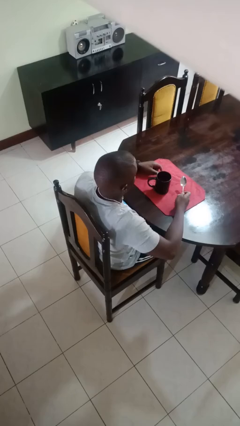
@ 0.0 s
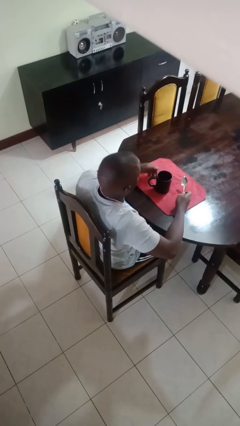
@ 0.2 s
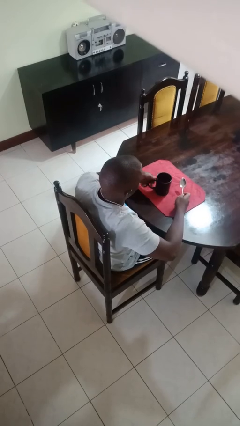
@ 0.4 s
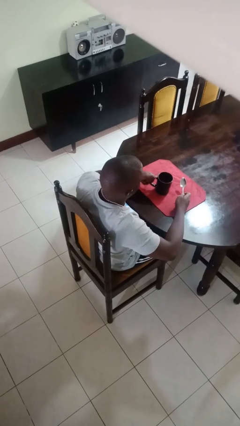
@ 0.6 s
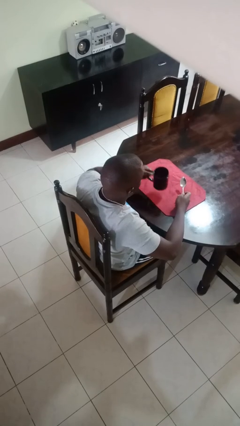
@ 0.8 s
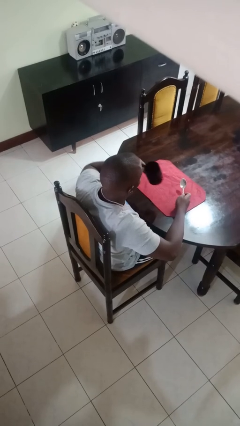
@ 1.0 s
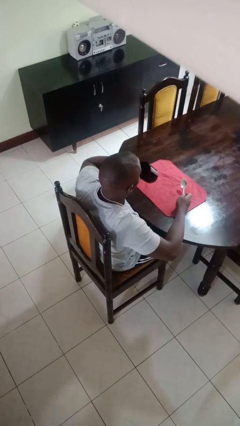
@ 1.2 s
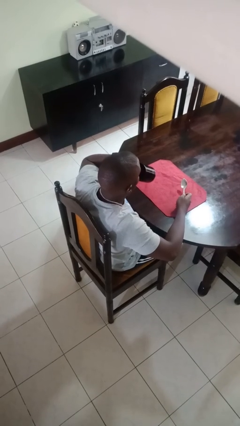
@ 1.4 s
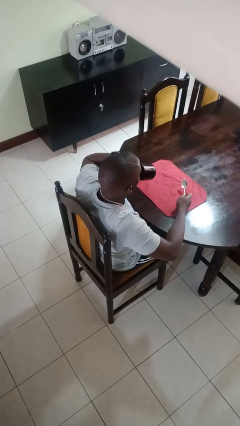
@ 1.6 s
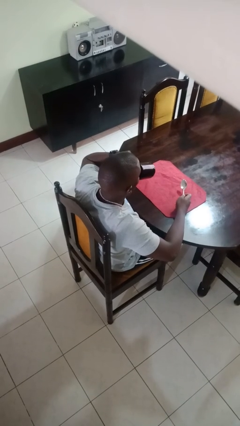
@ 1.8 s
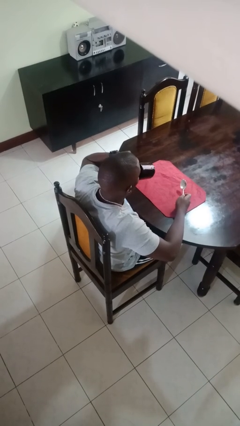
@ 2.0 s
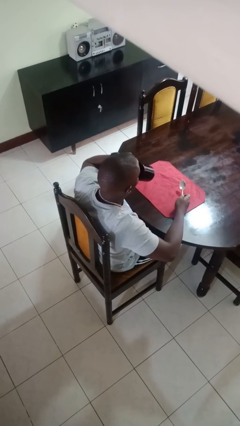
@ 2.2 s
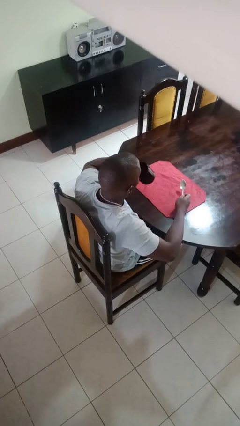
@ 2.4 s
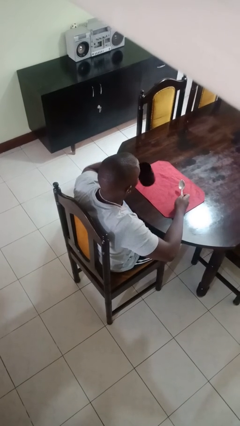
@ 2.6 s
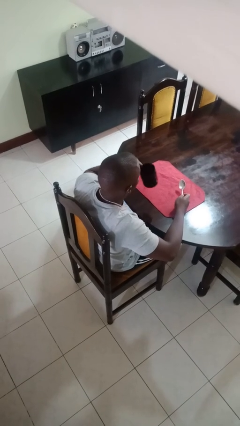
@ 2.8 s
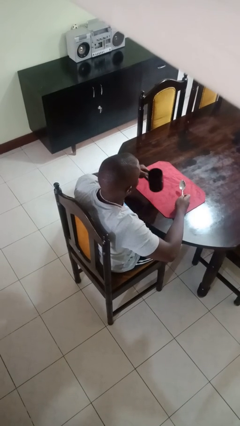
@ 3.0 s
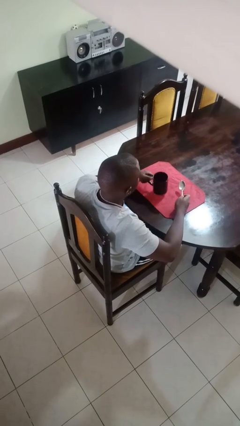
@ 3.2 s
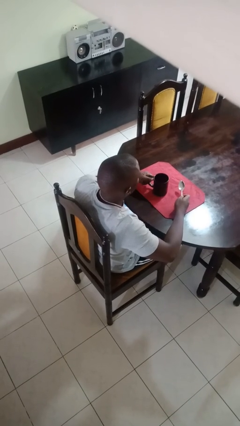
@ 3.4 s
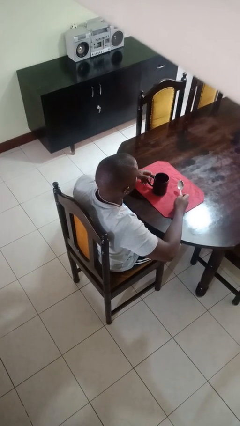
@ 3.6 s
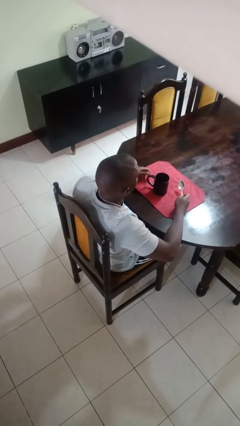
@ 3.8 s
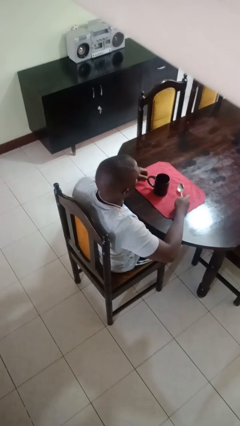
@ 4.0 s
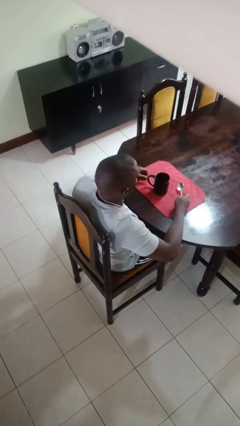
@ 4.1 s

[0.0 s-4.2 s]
person drinks from mug

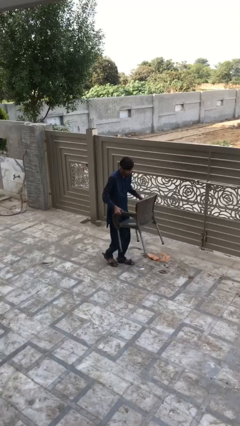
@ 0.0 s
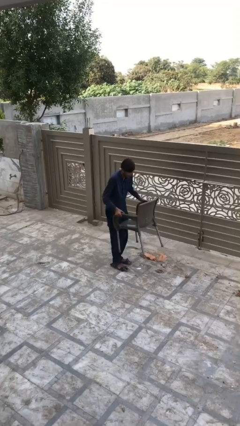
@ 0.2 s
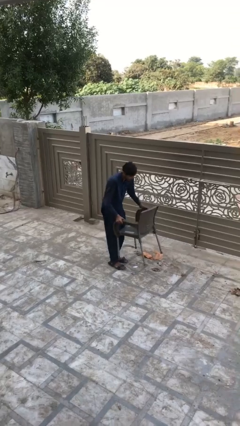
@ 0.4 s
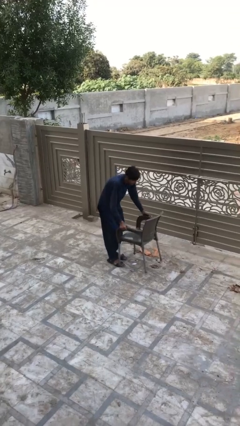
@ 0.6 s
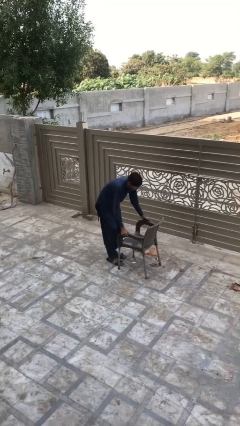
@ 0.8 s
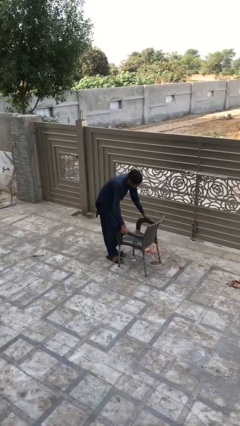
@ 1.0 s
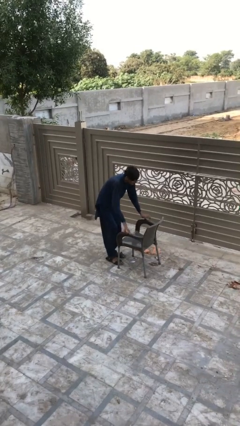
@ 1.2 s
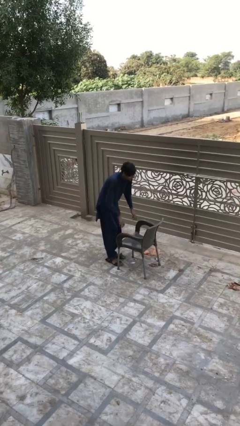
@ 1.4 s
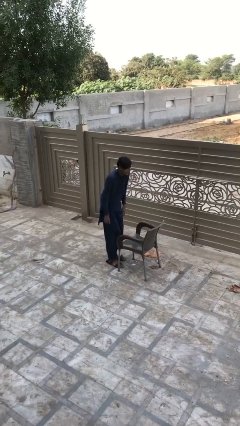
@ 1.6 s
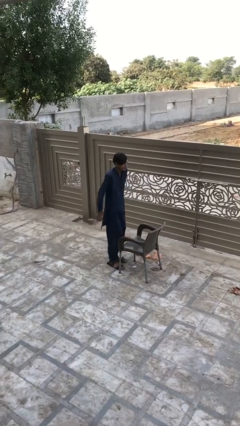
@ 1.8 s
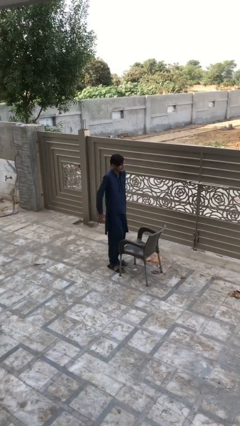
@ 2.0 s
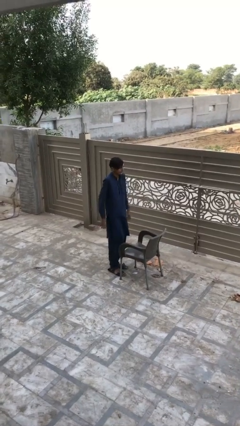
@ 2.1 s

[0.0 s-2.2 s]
person puts down object on floor

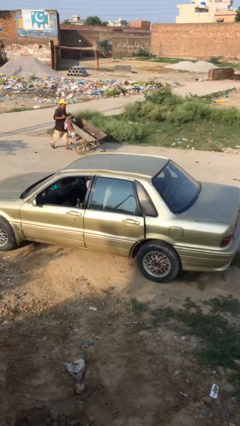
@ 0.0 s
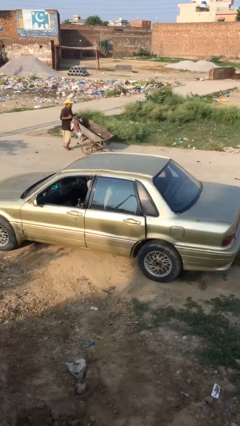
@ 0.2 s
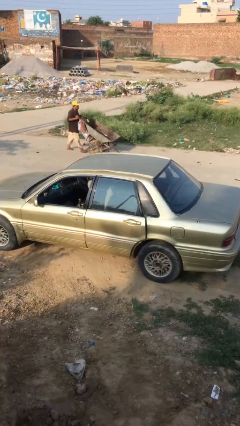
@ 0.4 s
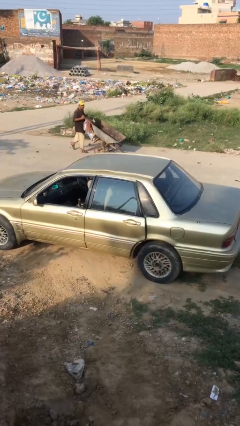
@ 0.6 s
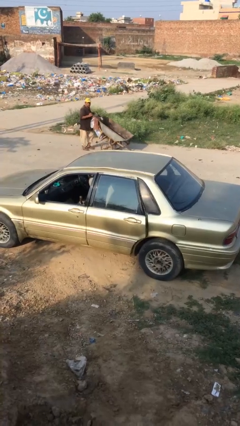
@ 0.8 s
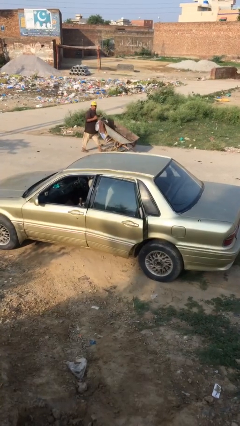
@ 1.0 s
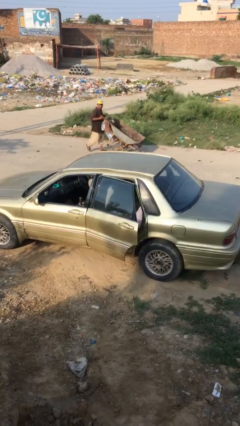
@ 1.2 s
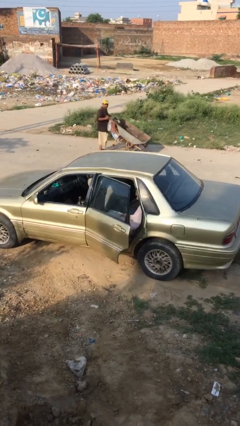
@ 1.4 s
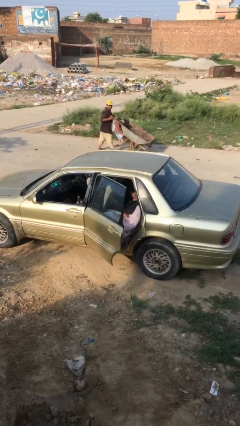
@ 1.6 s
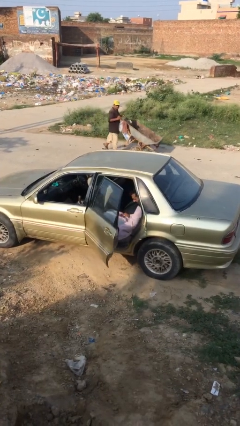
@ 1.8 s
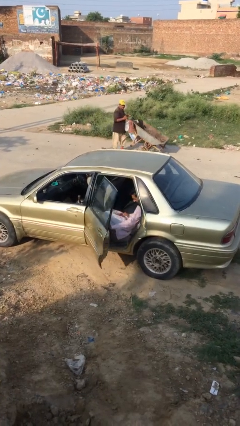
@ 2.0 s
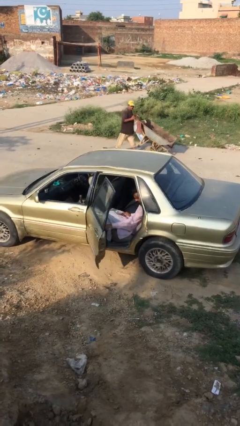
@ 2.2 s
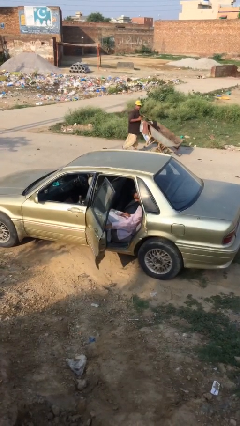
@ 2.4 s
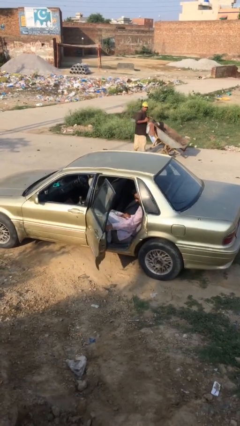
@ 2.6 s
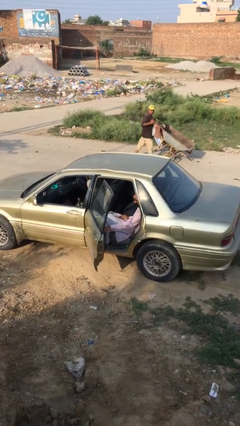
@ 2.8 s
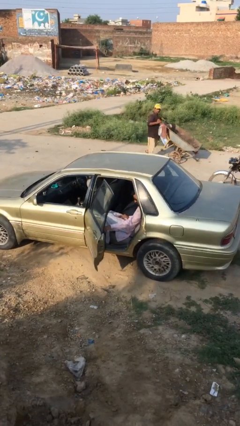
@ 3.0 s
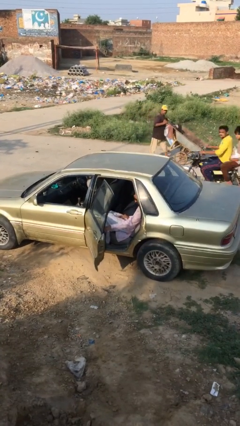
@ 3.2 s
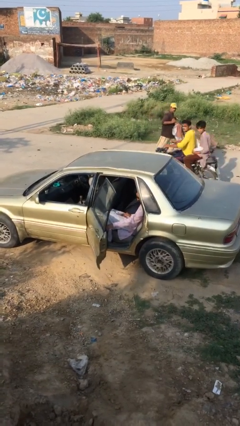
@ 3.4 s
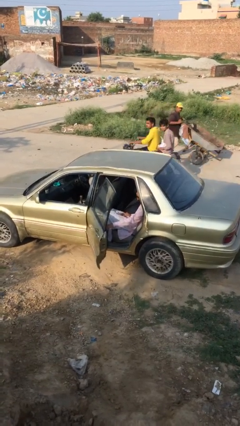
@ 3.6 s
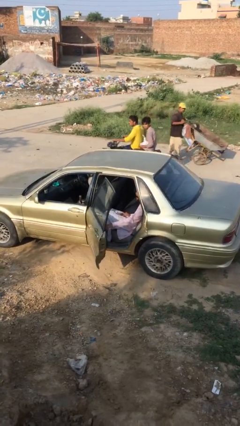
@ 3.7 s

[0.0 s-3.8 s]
person opens car door

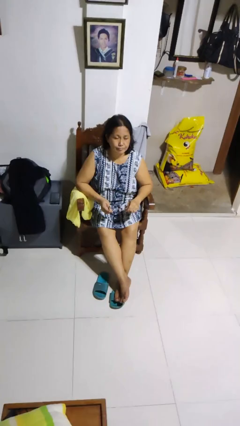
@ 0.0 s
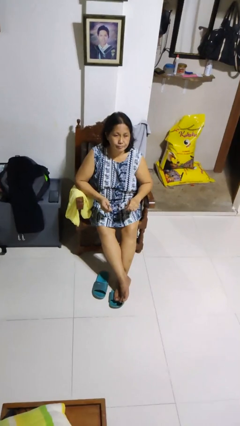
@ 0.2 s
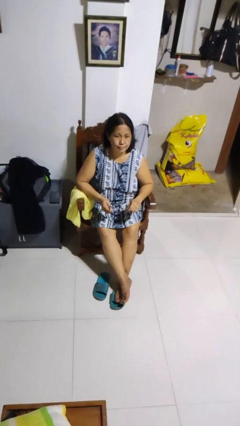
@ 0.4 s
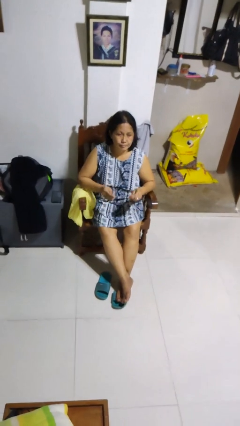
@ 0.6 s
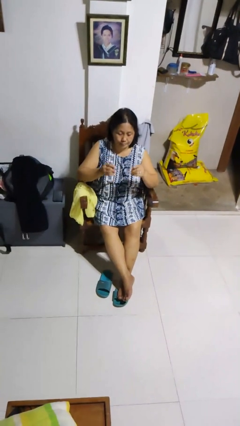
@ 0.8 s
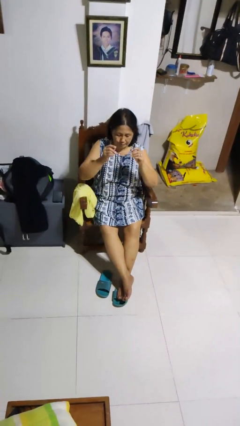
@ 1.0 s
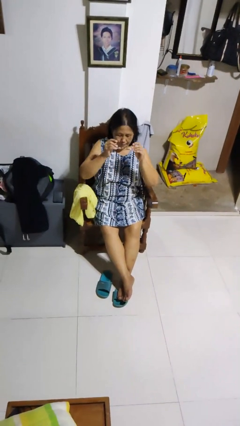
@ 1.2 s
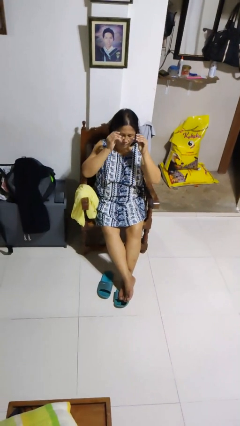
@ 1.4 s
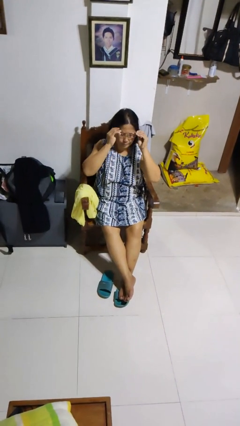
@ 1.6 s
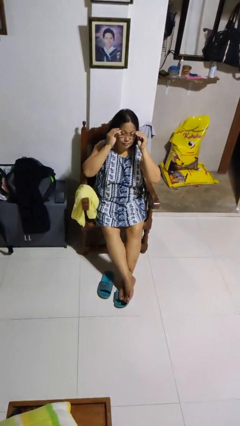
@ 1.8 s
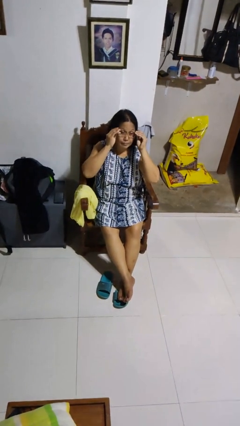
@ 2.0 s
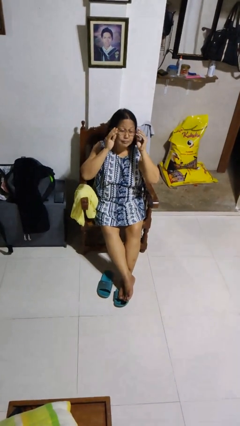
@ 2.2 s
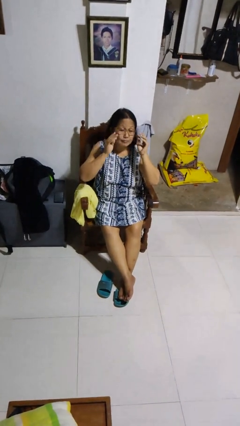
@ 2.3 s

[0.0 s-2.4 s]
person puts on glasses

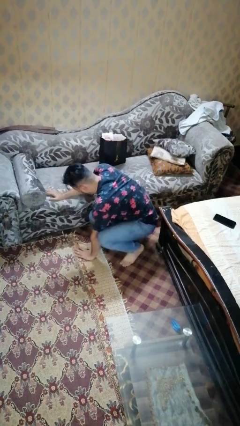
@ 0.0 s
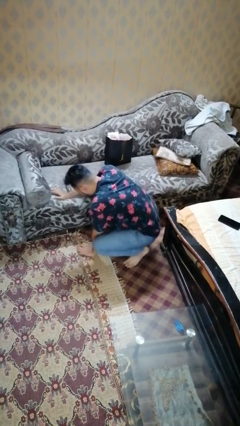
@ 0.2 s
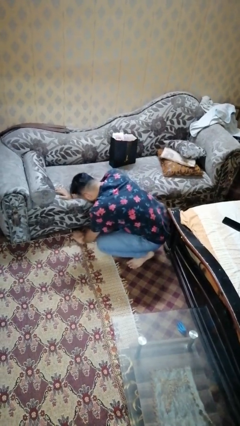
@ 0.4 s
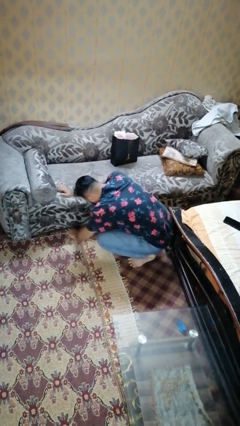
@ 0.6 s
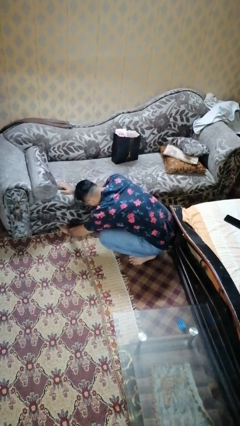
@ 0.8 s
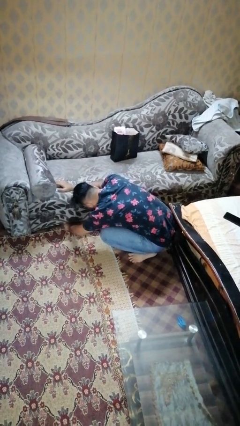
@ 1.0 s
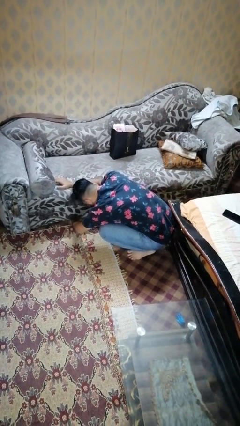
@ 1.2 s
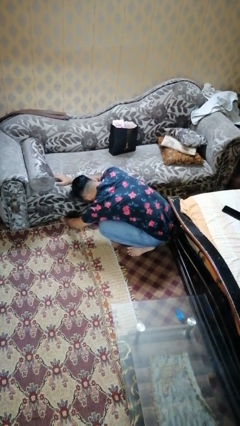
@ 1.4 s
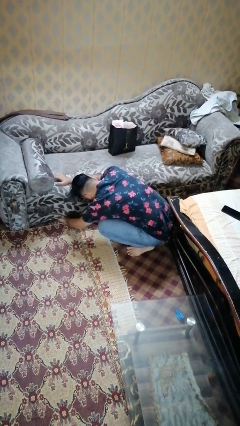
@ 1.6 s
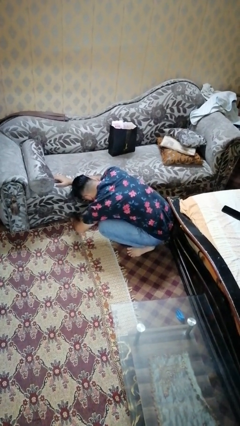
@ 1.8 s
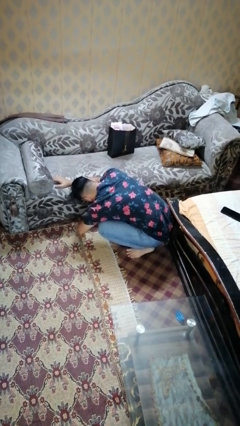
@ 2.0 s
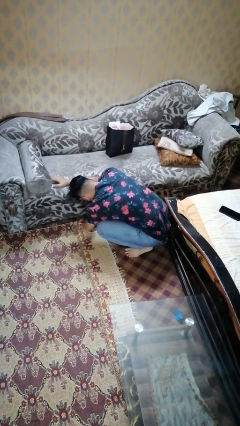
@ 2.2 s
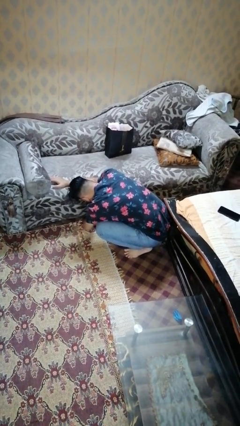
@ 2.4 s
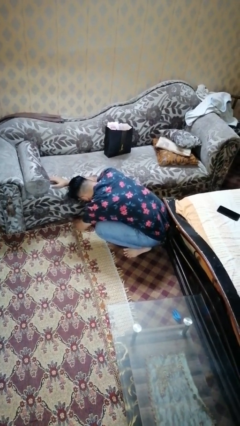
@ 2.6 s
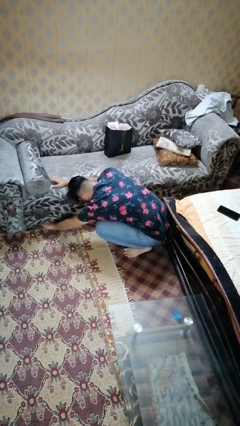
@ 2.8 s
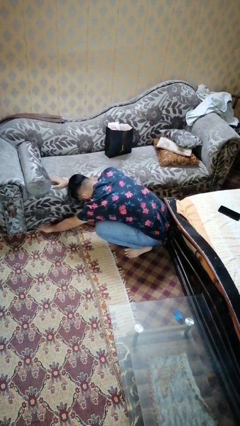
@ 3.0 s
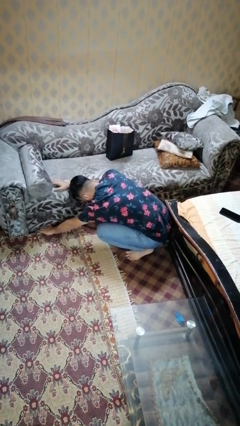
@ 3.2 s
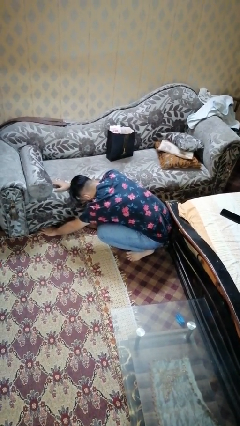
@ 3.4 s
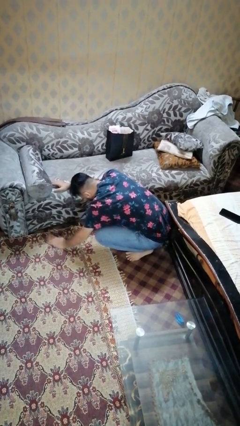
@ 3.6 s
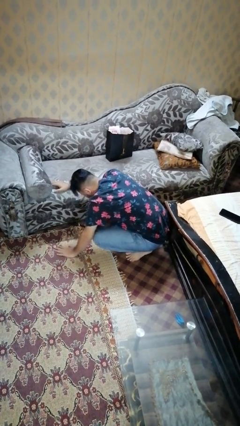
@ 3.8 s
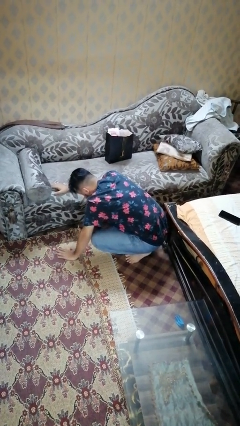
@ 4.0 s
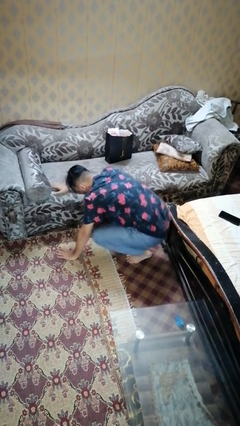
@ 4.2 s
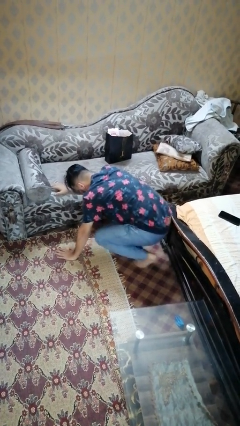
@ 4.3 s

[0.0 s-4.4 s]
person searches under couch
